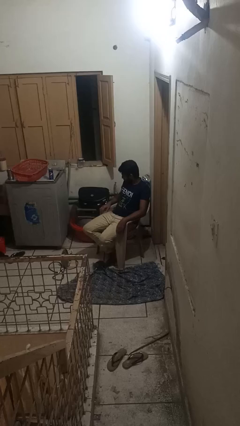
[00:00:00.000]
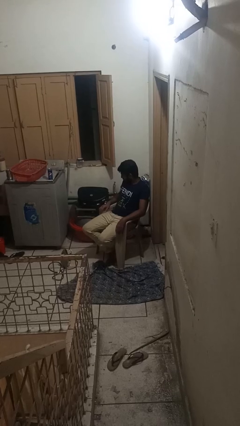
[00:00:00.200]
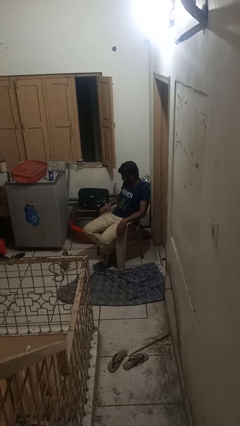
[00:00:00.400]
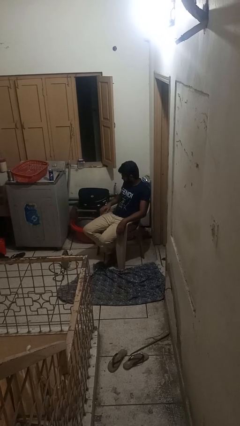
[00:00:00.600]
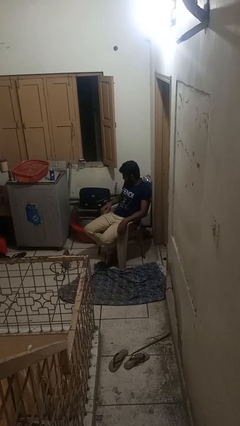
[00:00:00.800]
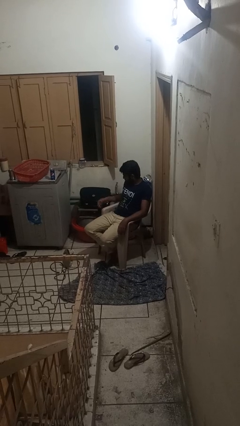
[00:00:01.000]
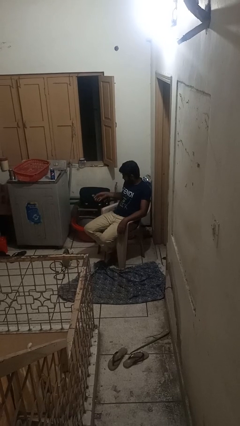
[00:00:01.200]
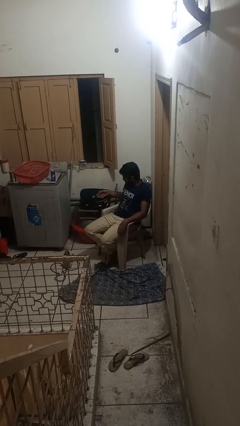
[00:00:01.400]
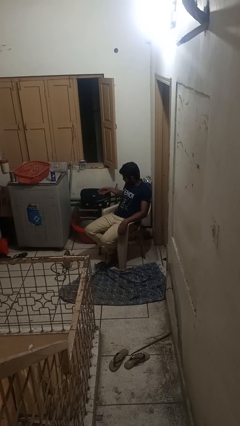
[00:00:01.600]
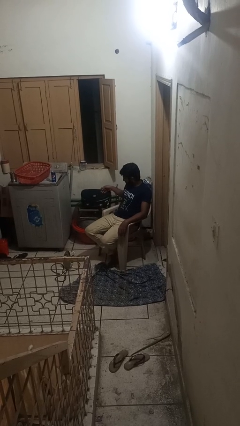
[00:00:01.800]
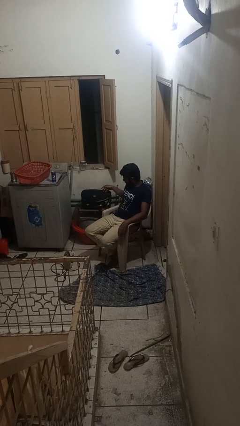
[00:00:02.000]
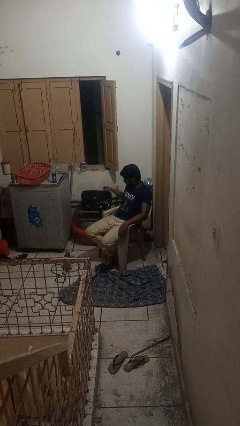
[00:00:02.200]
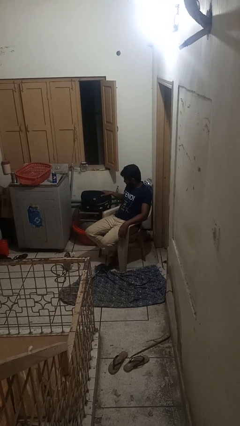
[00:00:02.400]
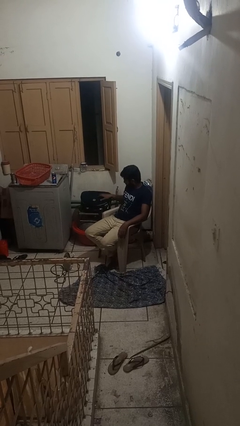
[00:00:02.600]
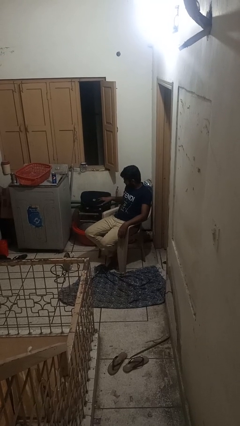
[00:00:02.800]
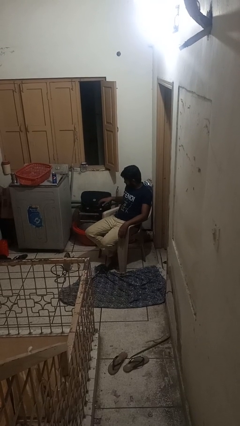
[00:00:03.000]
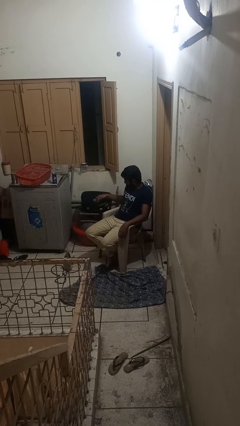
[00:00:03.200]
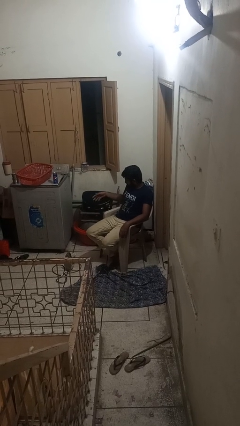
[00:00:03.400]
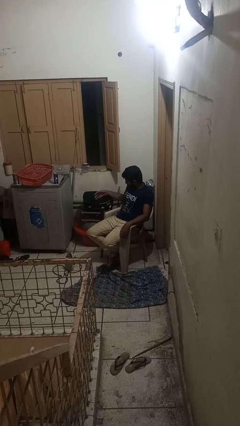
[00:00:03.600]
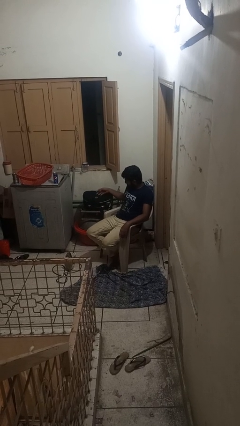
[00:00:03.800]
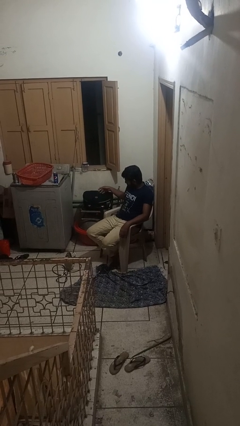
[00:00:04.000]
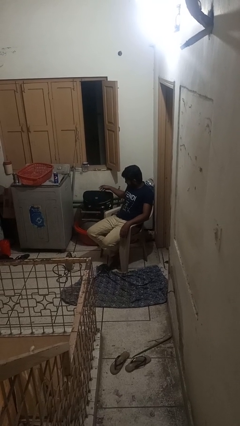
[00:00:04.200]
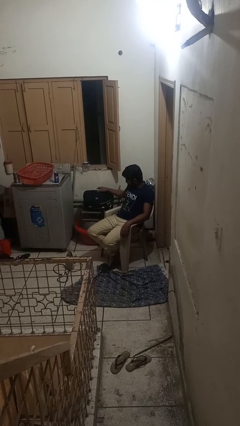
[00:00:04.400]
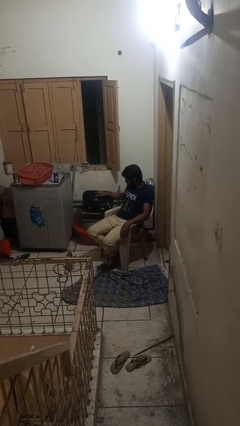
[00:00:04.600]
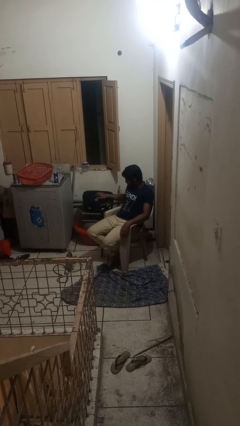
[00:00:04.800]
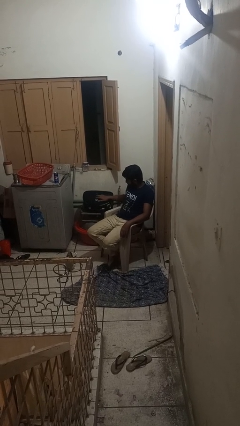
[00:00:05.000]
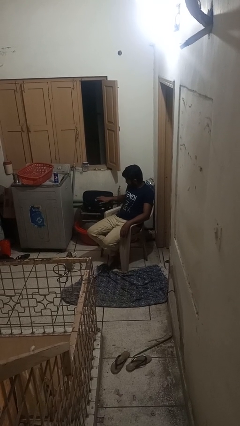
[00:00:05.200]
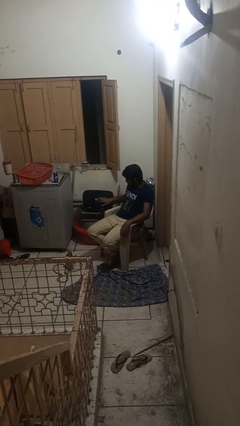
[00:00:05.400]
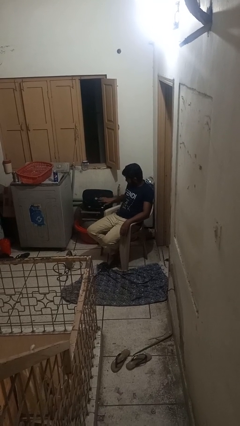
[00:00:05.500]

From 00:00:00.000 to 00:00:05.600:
person waves hand over object

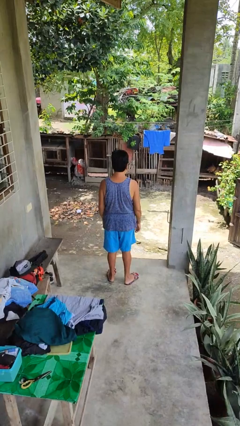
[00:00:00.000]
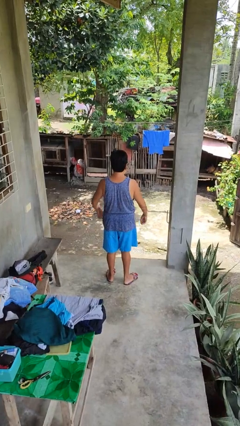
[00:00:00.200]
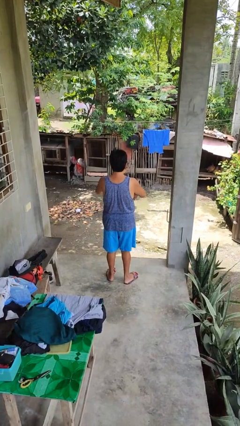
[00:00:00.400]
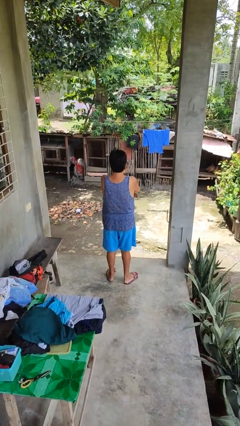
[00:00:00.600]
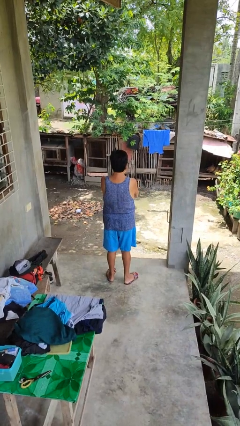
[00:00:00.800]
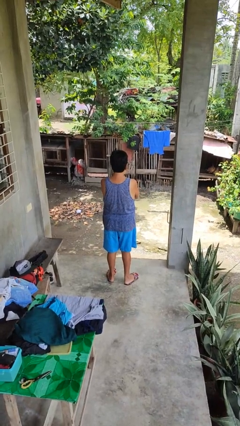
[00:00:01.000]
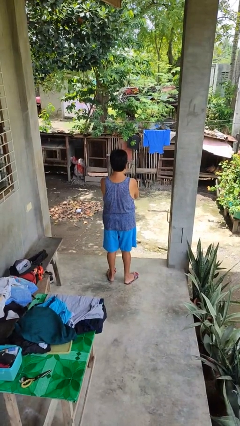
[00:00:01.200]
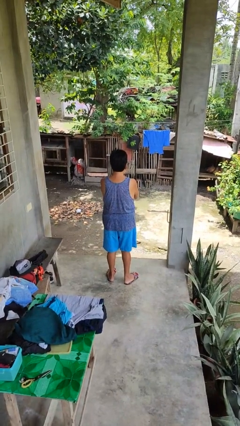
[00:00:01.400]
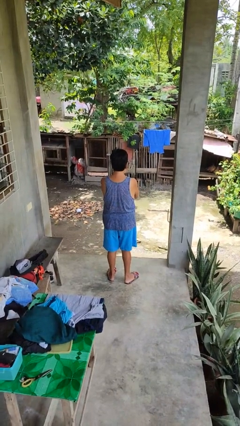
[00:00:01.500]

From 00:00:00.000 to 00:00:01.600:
person crosses arms

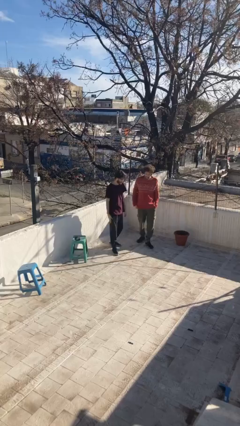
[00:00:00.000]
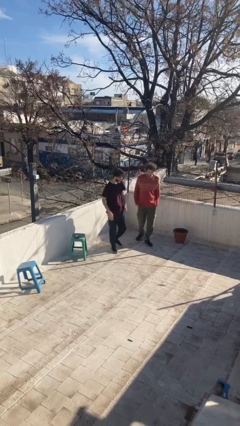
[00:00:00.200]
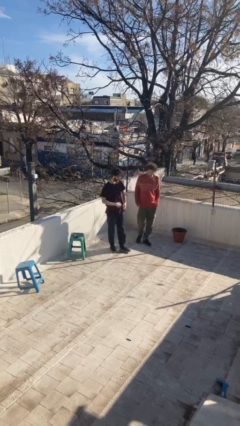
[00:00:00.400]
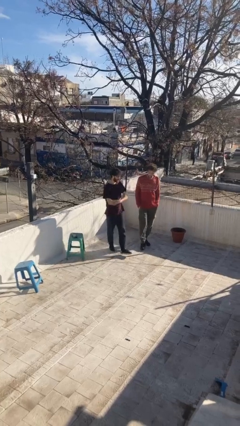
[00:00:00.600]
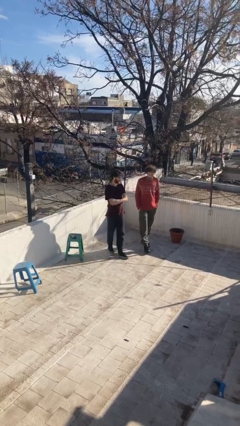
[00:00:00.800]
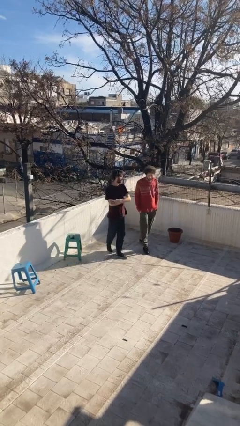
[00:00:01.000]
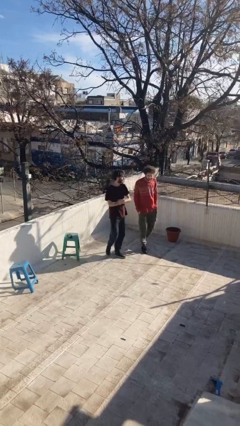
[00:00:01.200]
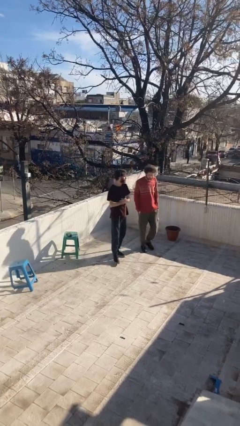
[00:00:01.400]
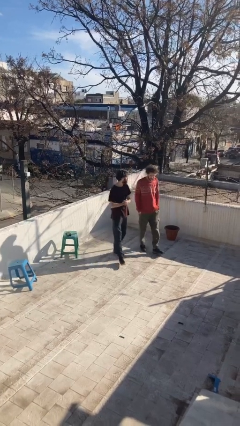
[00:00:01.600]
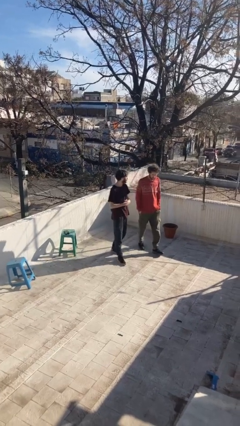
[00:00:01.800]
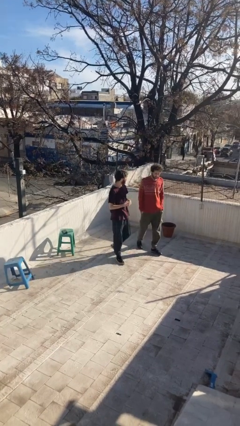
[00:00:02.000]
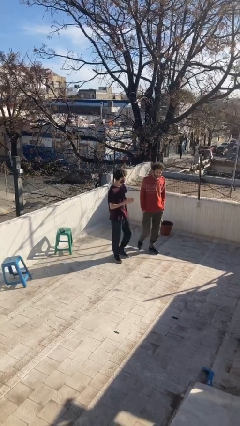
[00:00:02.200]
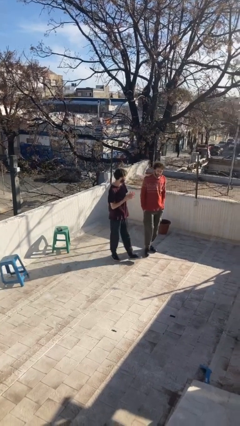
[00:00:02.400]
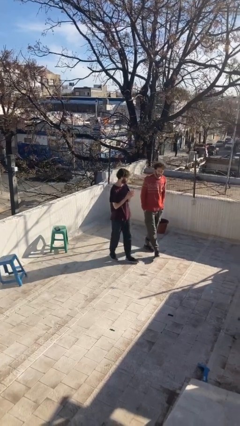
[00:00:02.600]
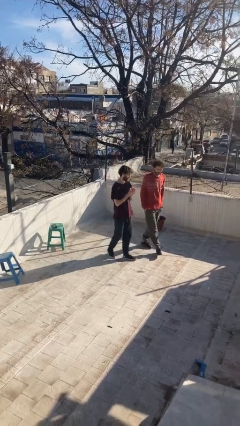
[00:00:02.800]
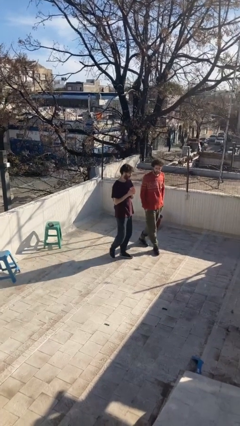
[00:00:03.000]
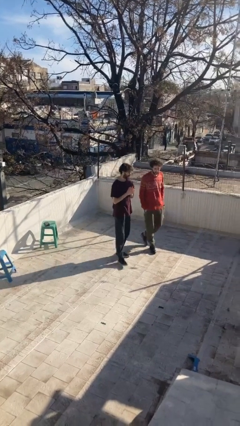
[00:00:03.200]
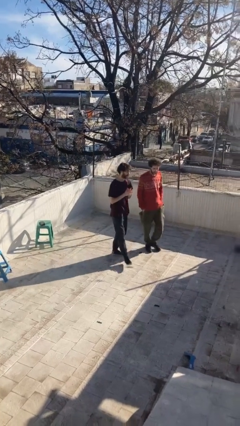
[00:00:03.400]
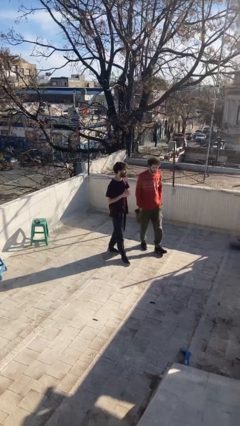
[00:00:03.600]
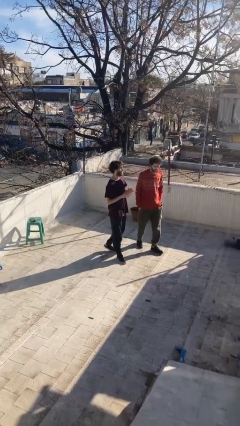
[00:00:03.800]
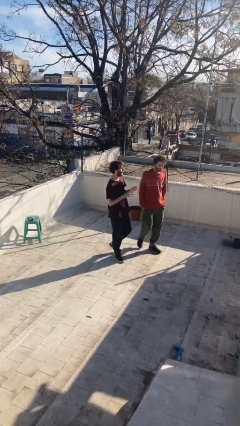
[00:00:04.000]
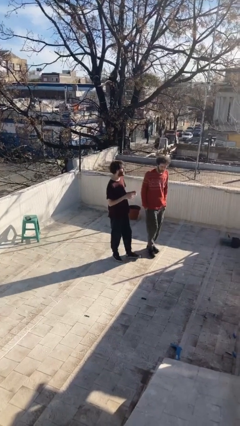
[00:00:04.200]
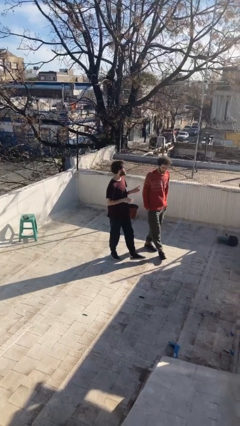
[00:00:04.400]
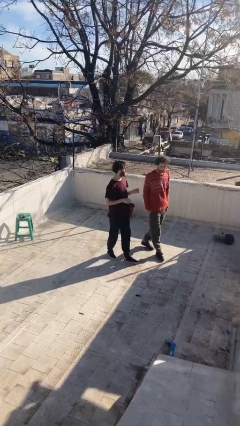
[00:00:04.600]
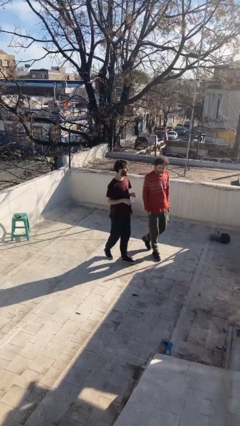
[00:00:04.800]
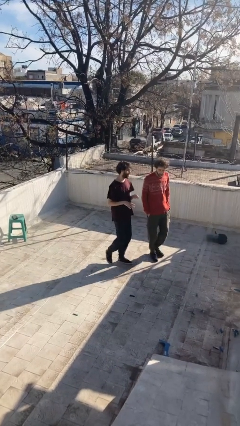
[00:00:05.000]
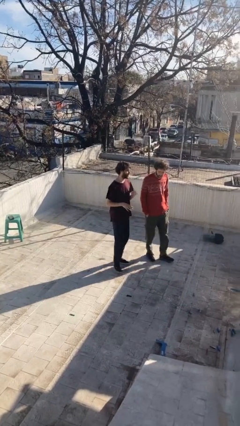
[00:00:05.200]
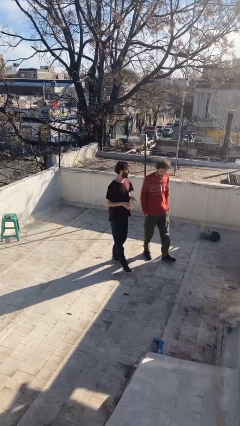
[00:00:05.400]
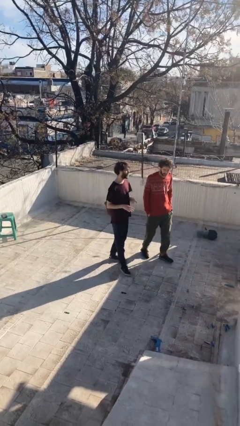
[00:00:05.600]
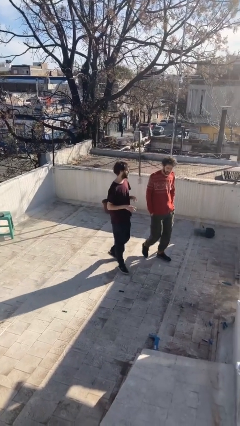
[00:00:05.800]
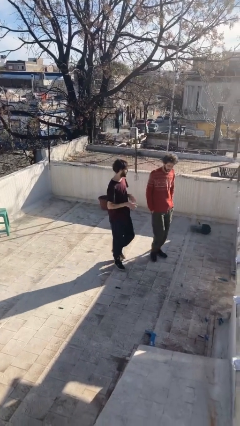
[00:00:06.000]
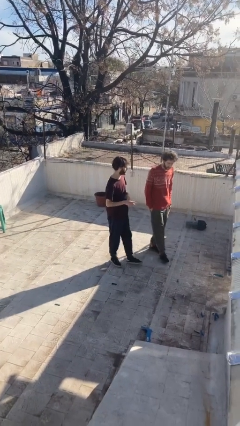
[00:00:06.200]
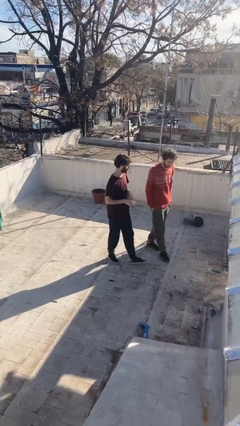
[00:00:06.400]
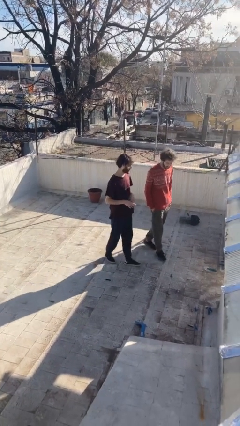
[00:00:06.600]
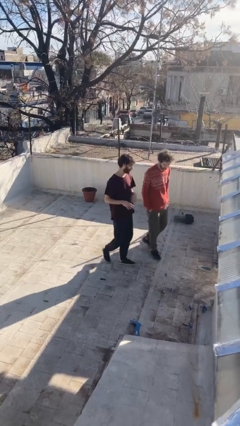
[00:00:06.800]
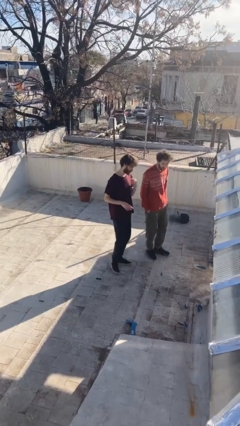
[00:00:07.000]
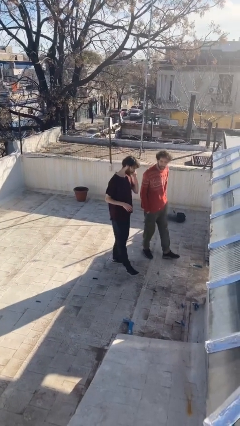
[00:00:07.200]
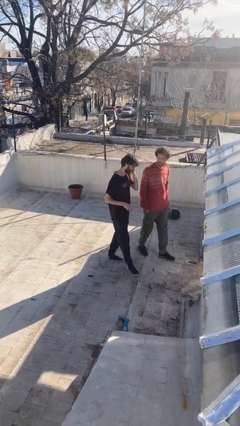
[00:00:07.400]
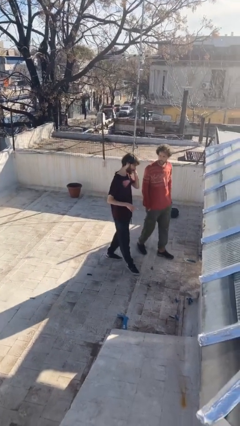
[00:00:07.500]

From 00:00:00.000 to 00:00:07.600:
person talks to person

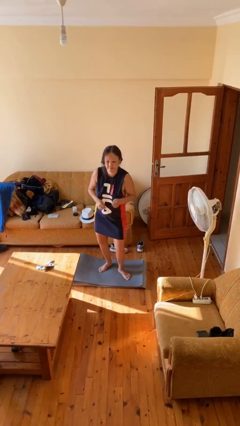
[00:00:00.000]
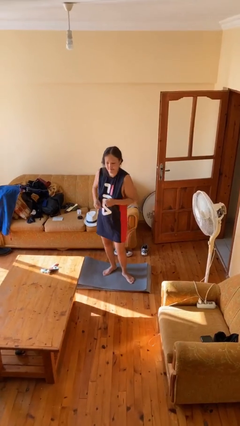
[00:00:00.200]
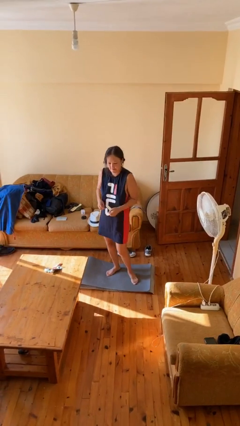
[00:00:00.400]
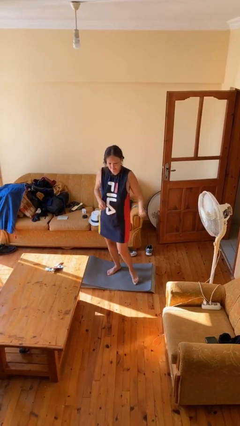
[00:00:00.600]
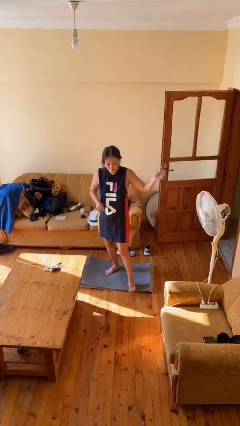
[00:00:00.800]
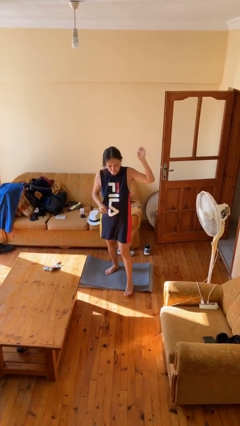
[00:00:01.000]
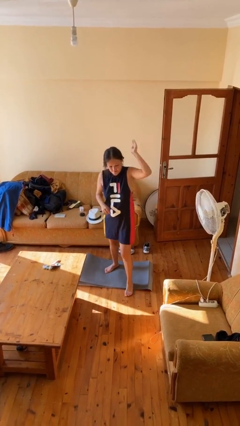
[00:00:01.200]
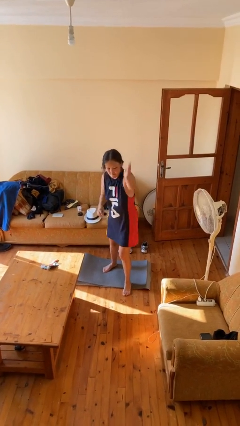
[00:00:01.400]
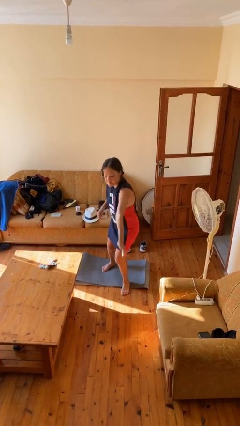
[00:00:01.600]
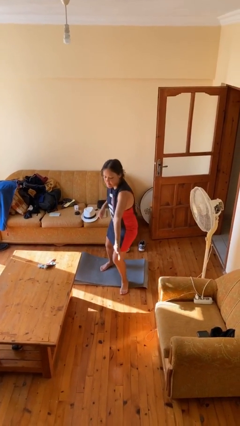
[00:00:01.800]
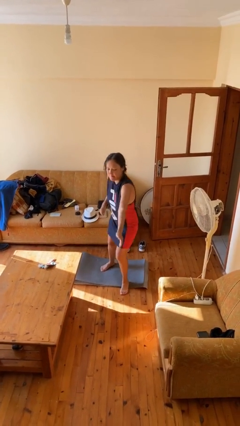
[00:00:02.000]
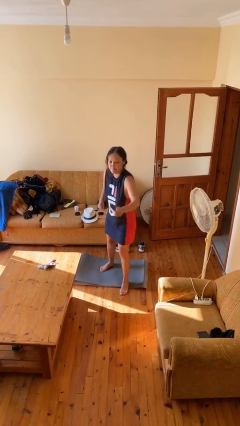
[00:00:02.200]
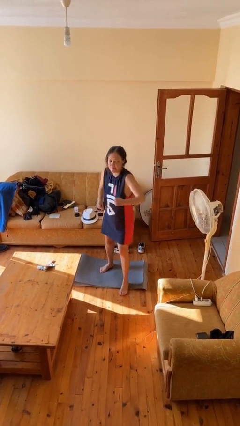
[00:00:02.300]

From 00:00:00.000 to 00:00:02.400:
person karate chop

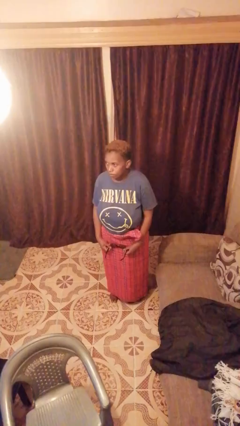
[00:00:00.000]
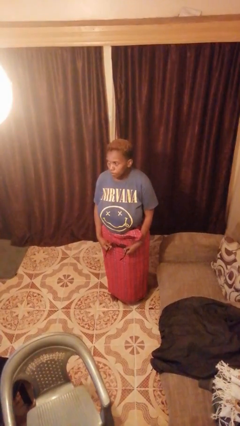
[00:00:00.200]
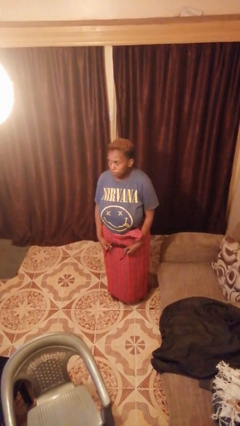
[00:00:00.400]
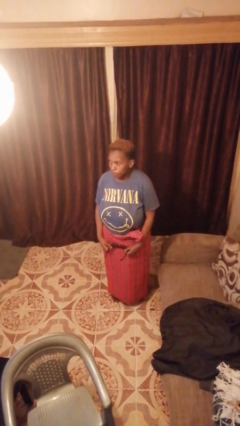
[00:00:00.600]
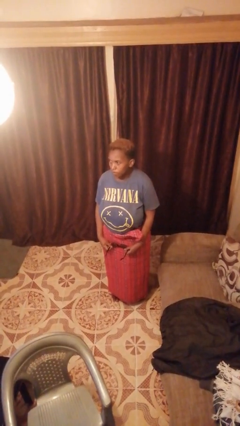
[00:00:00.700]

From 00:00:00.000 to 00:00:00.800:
person takes off sunglasses
